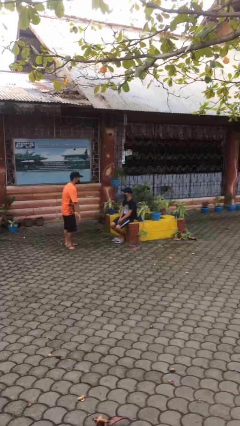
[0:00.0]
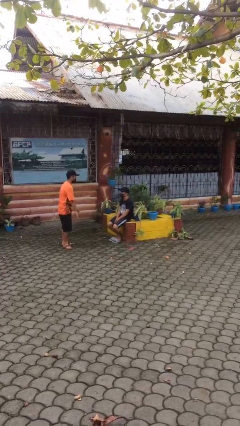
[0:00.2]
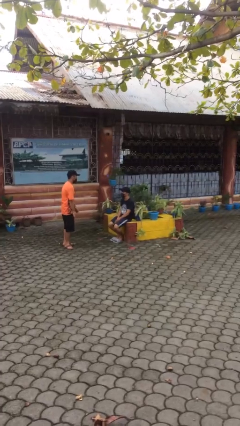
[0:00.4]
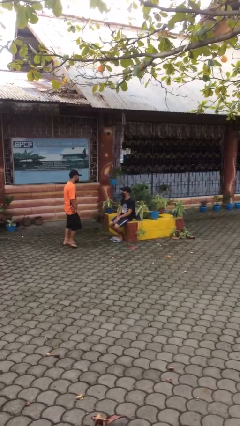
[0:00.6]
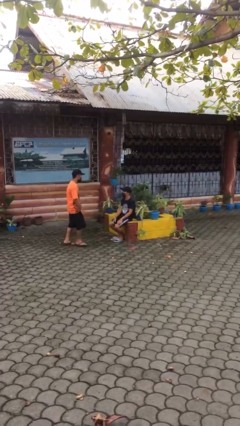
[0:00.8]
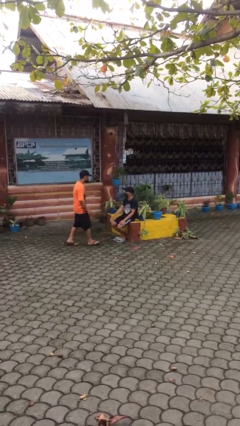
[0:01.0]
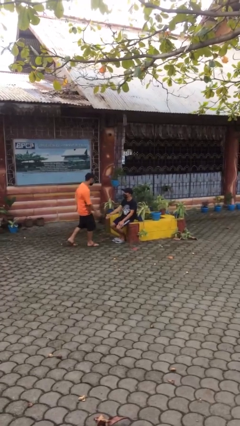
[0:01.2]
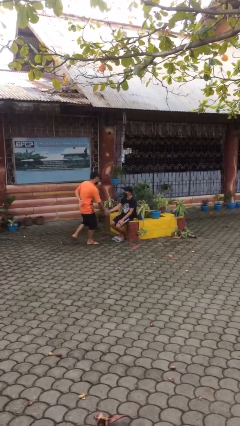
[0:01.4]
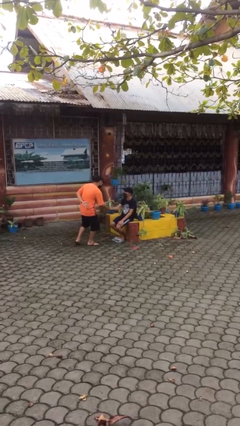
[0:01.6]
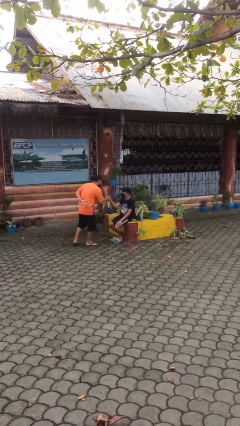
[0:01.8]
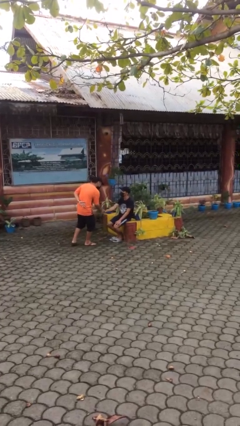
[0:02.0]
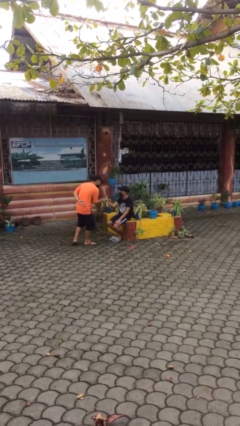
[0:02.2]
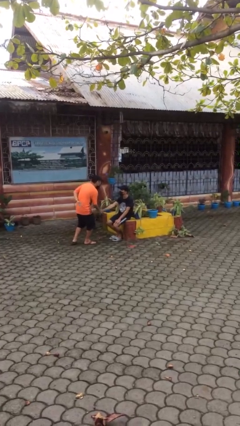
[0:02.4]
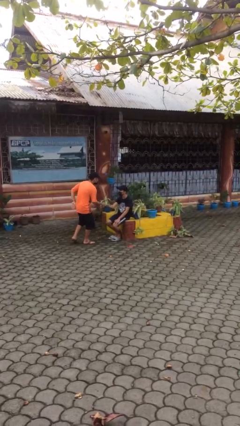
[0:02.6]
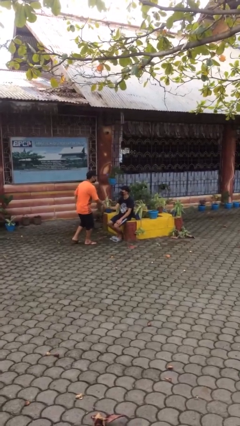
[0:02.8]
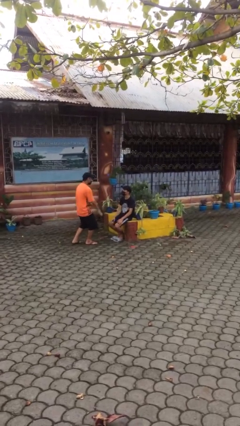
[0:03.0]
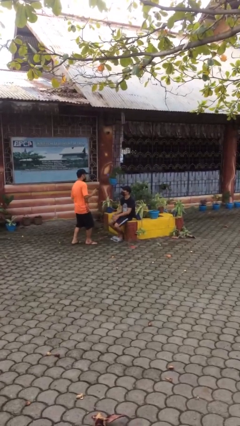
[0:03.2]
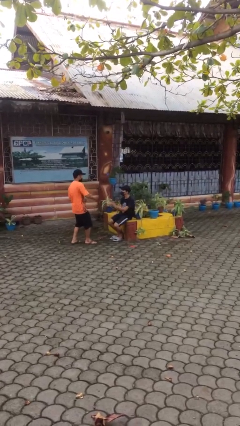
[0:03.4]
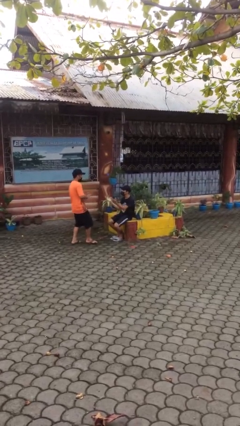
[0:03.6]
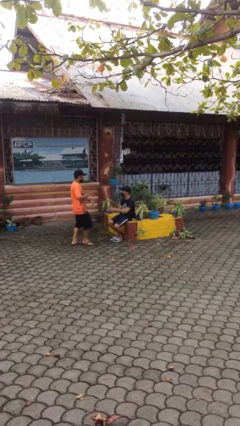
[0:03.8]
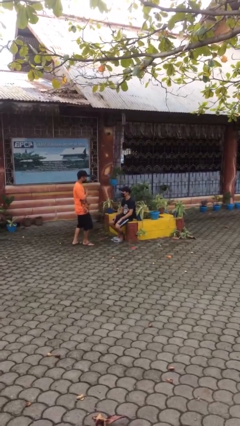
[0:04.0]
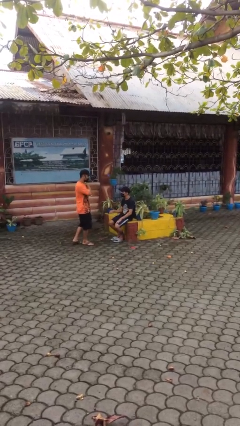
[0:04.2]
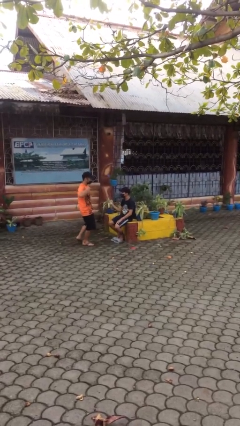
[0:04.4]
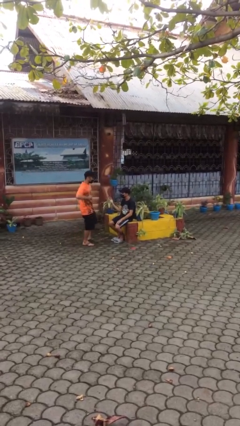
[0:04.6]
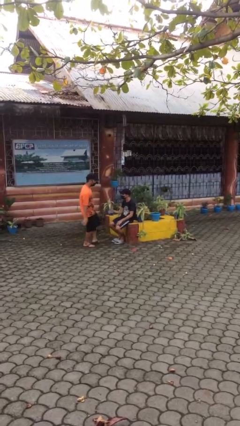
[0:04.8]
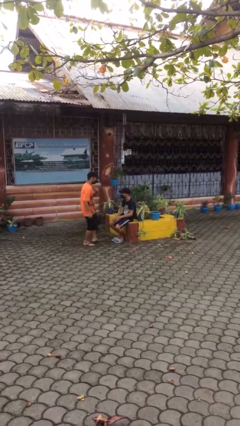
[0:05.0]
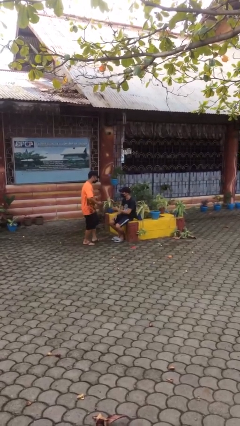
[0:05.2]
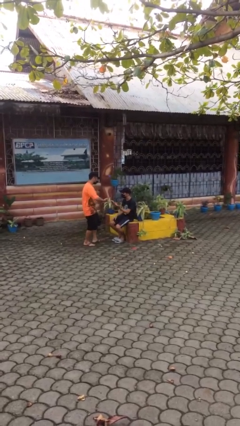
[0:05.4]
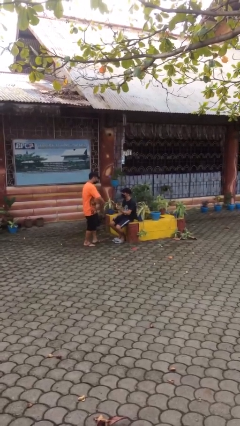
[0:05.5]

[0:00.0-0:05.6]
person shakes hand

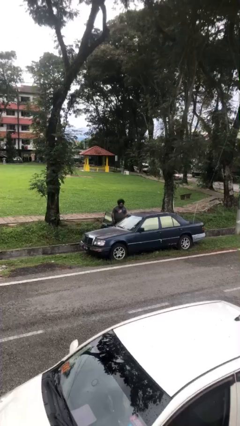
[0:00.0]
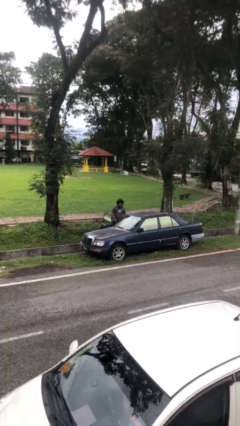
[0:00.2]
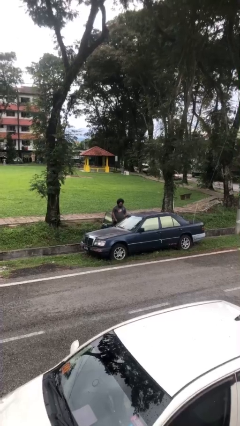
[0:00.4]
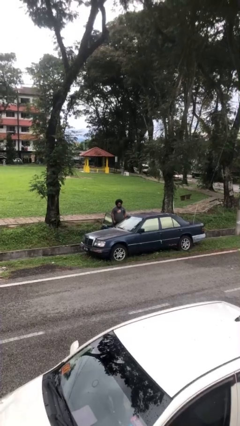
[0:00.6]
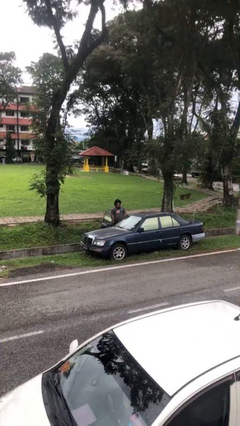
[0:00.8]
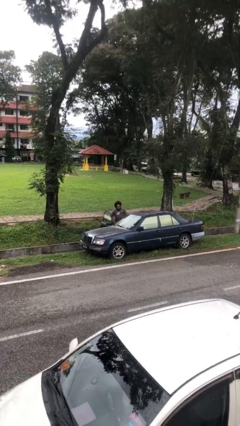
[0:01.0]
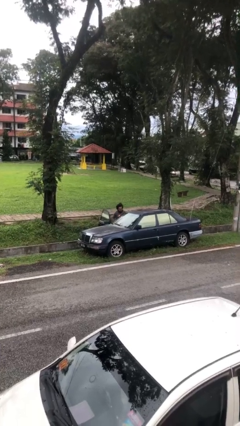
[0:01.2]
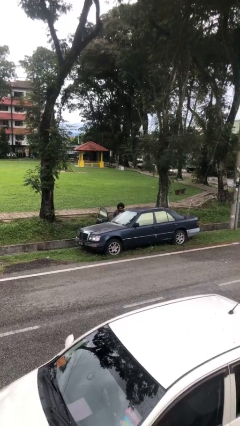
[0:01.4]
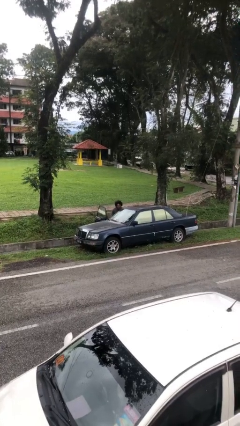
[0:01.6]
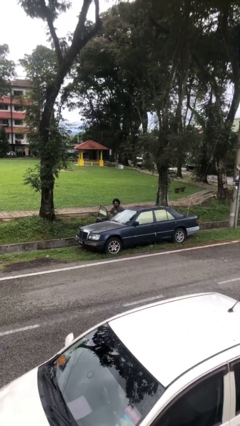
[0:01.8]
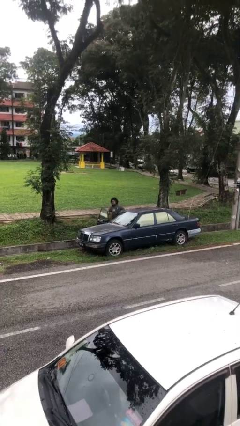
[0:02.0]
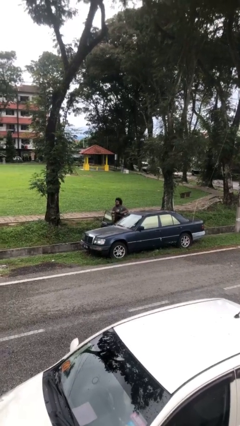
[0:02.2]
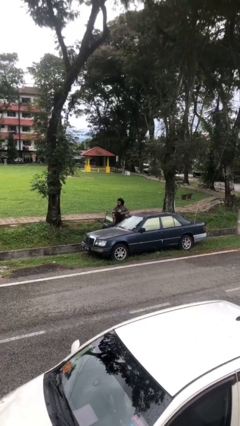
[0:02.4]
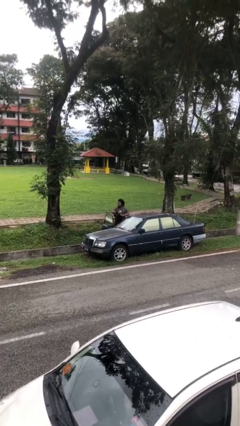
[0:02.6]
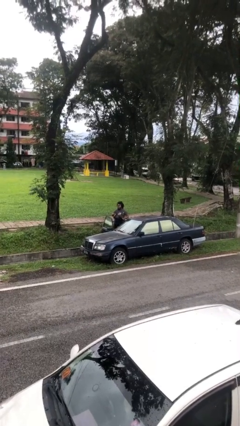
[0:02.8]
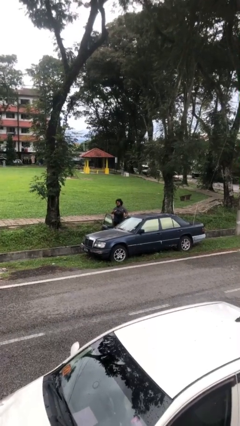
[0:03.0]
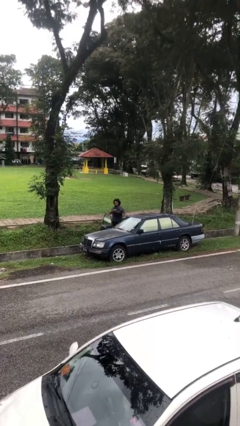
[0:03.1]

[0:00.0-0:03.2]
person unloads car

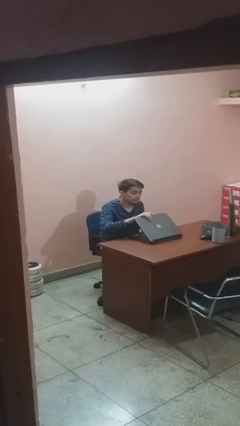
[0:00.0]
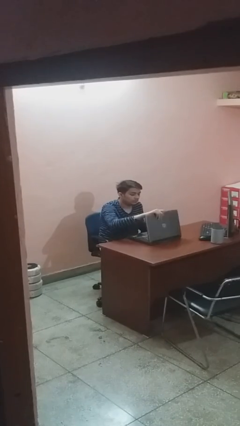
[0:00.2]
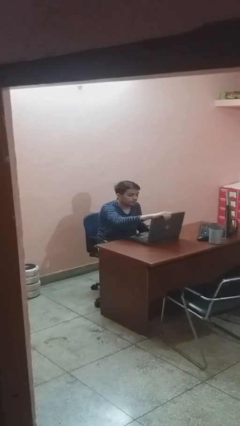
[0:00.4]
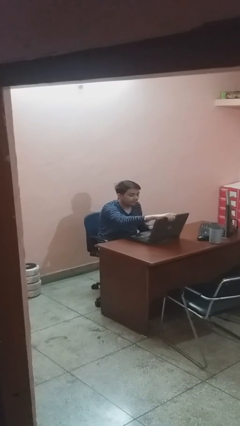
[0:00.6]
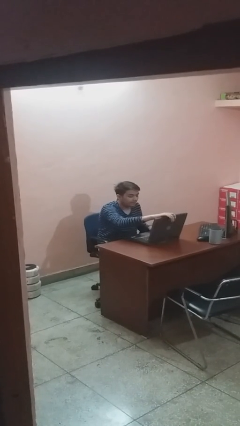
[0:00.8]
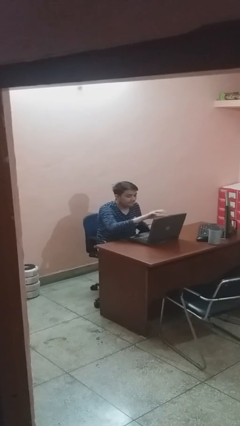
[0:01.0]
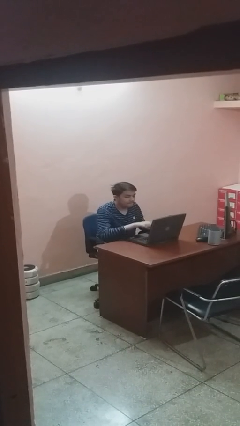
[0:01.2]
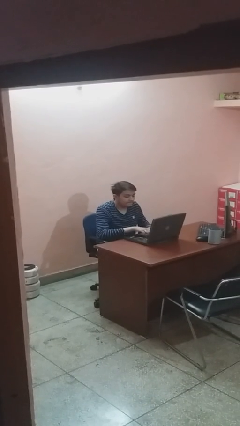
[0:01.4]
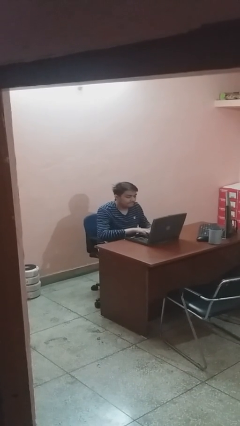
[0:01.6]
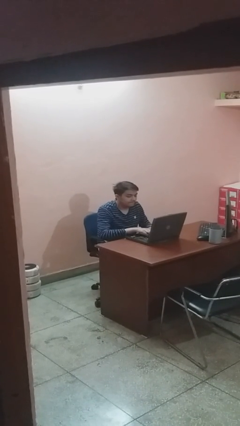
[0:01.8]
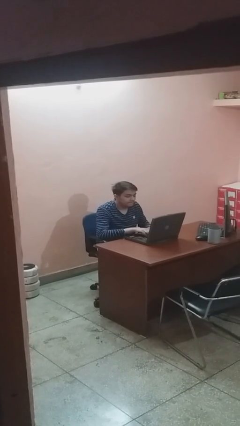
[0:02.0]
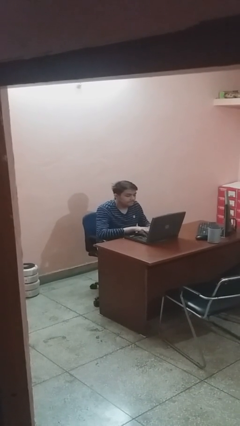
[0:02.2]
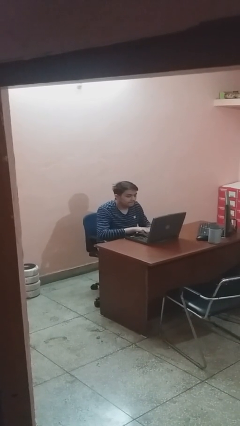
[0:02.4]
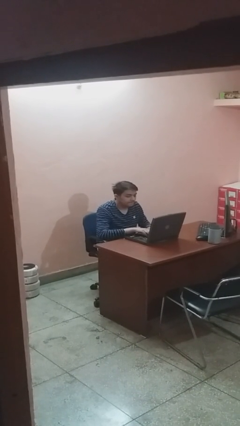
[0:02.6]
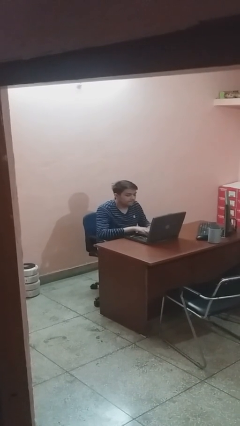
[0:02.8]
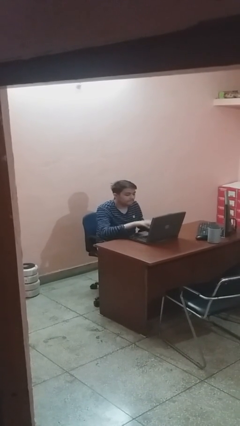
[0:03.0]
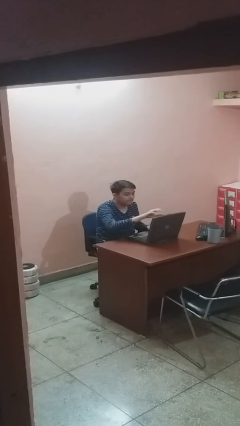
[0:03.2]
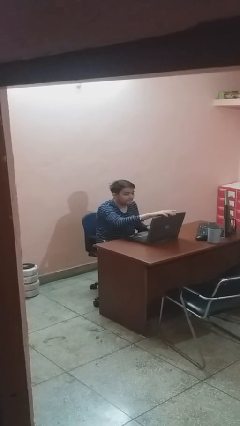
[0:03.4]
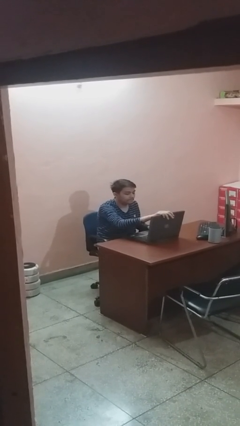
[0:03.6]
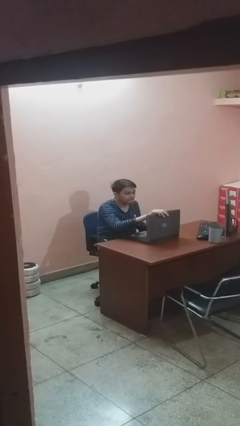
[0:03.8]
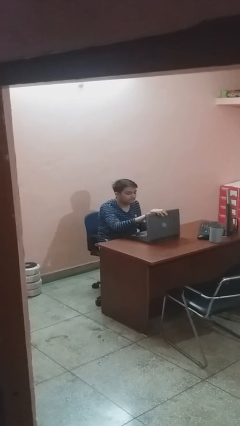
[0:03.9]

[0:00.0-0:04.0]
person interacts with laptop

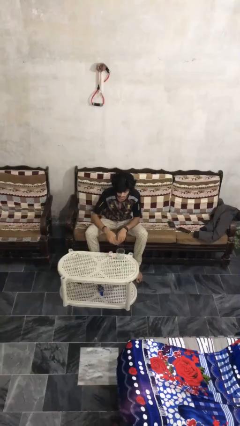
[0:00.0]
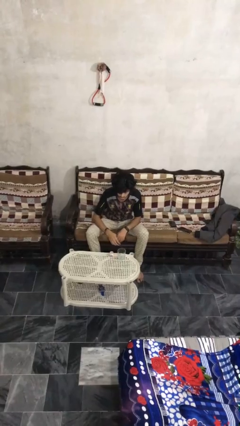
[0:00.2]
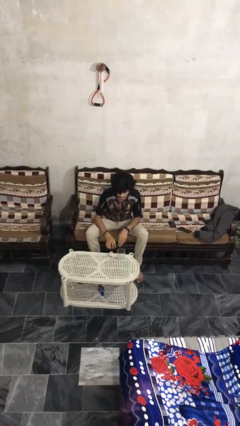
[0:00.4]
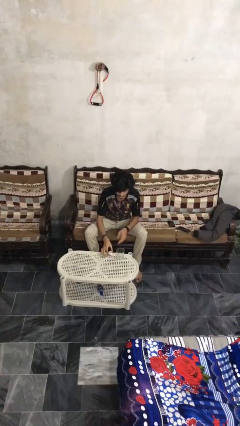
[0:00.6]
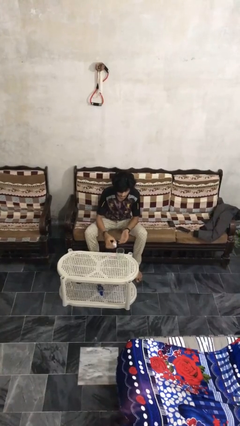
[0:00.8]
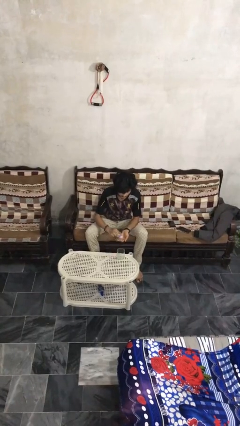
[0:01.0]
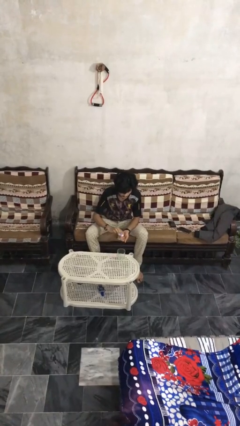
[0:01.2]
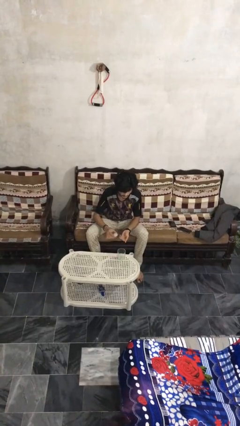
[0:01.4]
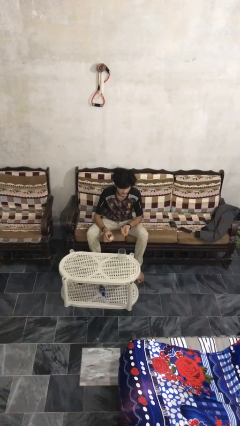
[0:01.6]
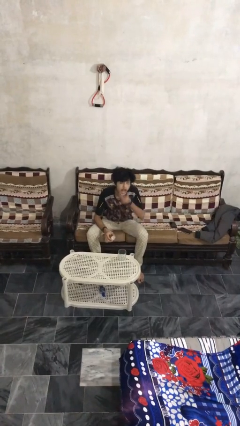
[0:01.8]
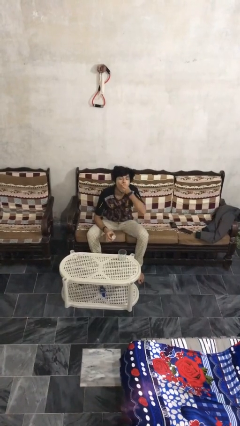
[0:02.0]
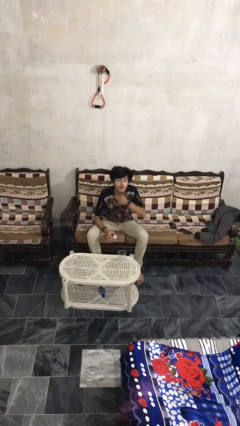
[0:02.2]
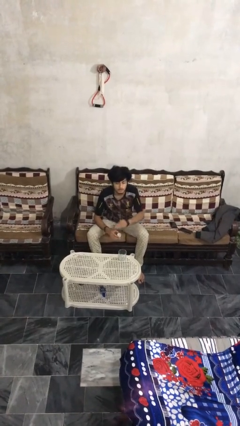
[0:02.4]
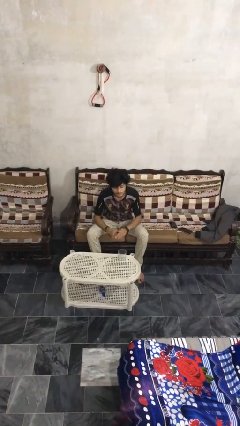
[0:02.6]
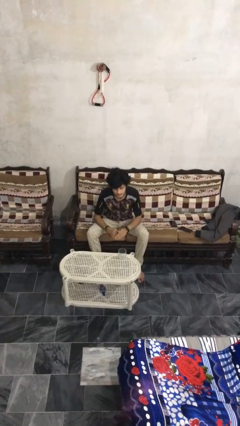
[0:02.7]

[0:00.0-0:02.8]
person takes medicine pills

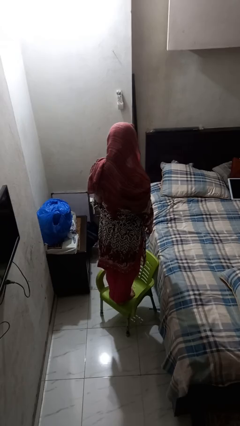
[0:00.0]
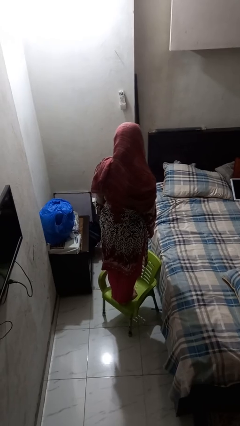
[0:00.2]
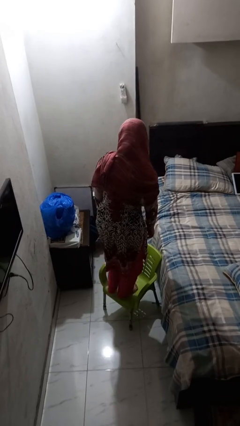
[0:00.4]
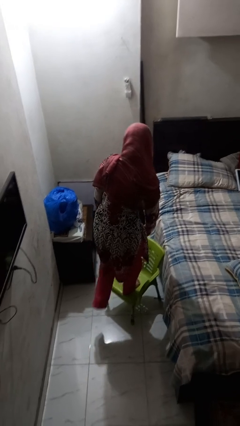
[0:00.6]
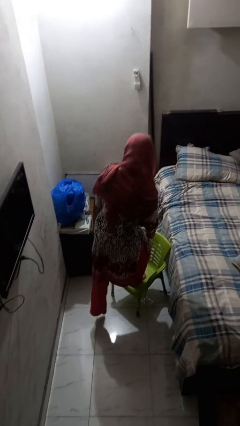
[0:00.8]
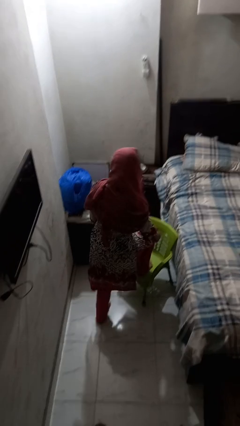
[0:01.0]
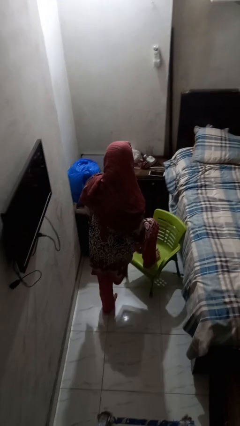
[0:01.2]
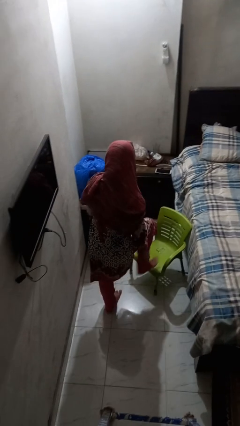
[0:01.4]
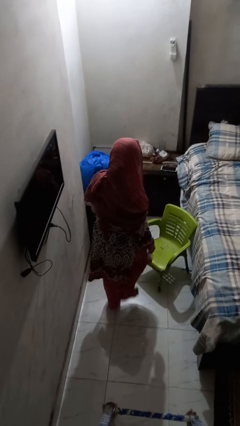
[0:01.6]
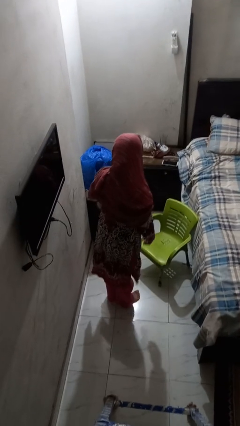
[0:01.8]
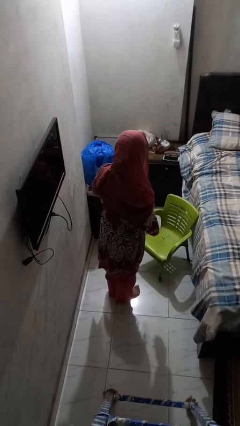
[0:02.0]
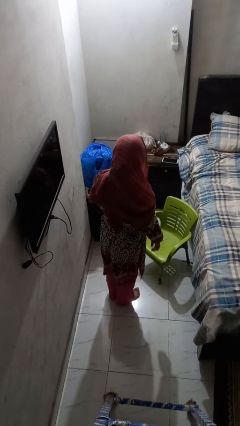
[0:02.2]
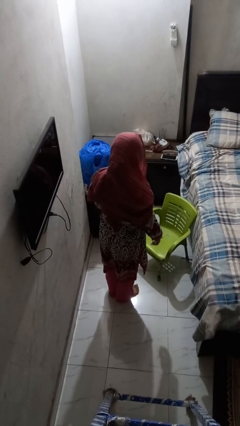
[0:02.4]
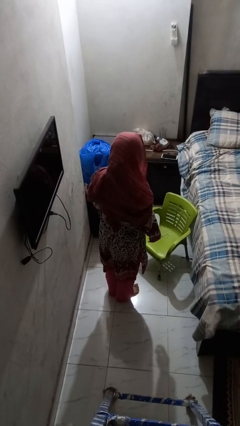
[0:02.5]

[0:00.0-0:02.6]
person climbs off chair
